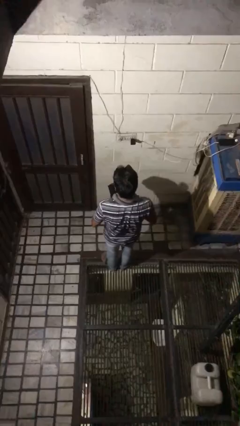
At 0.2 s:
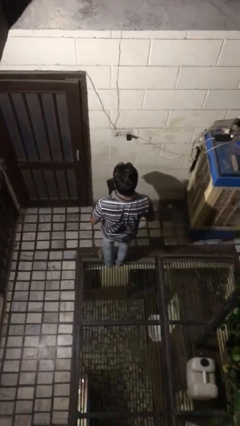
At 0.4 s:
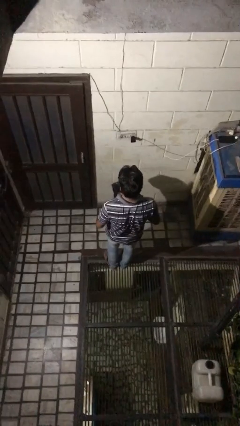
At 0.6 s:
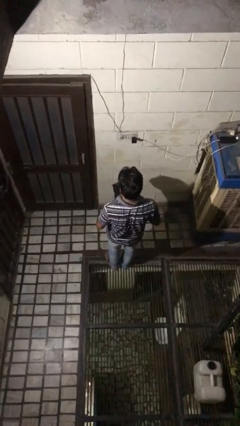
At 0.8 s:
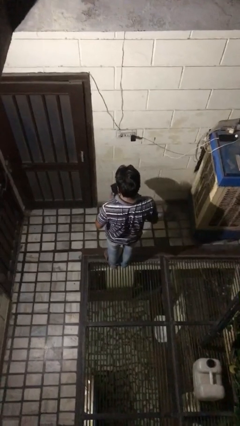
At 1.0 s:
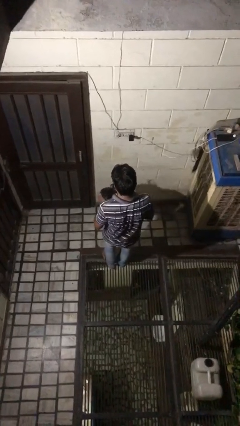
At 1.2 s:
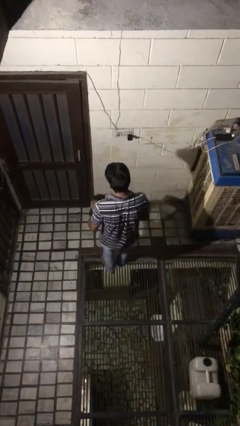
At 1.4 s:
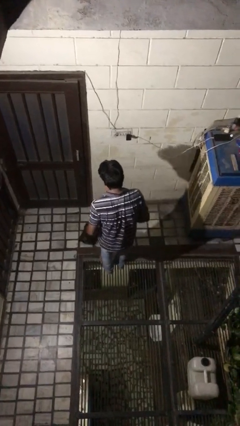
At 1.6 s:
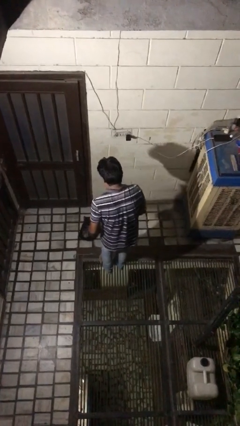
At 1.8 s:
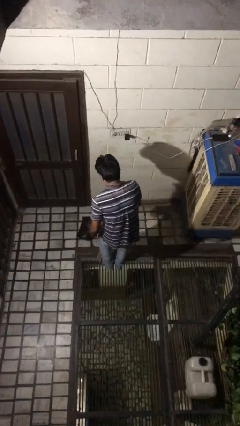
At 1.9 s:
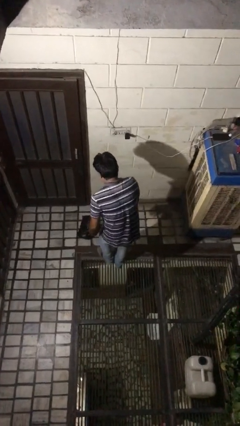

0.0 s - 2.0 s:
person throws object to ground

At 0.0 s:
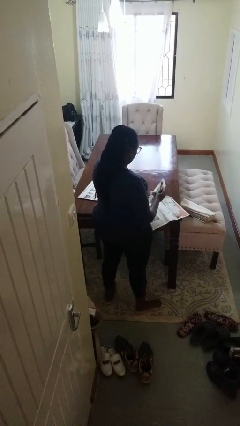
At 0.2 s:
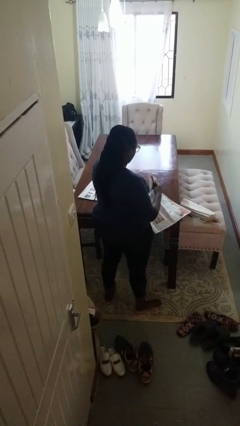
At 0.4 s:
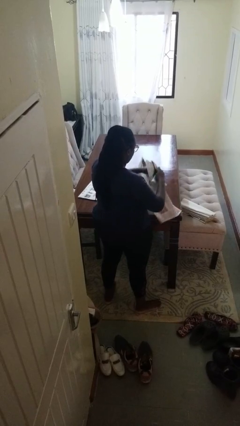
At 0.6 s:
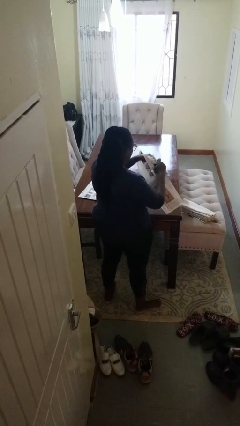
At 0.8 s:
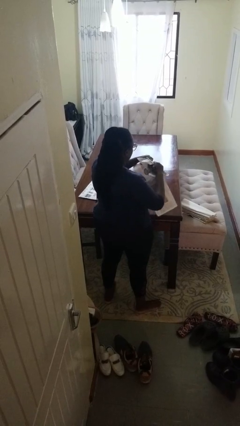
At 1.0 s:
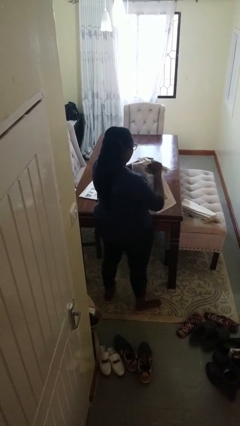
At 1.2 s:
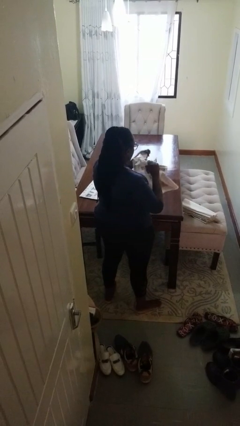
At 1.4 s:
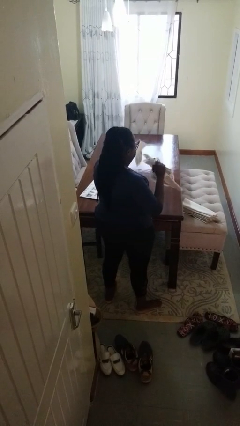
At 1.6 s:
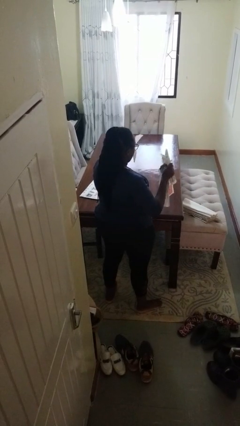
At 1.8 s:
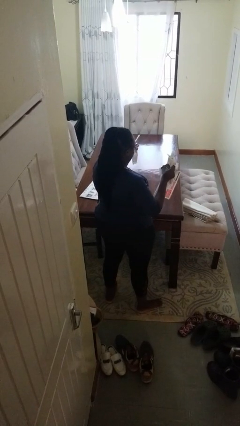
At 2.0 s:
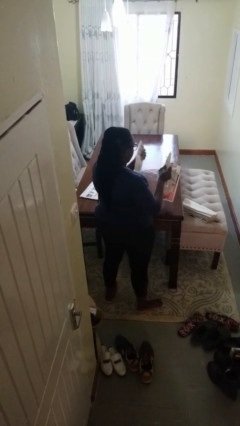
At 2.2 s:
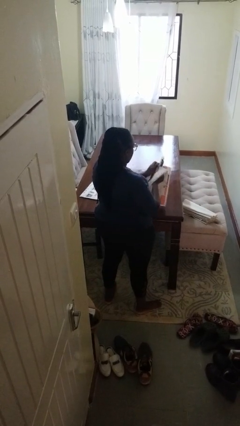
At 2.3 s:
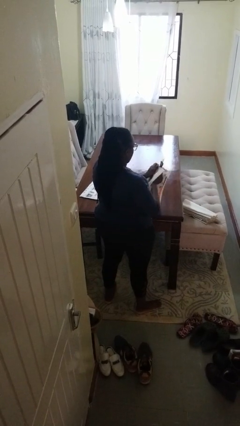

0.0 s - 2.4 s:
person tears paper

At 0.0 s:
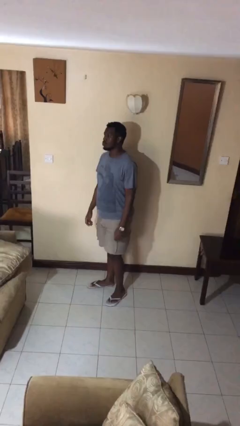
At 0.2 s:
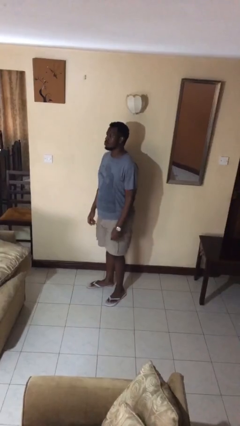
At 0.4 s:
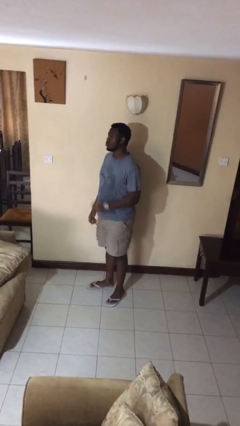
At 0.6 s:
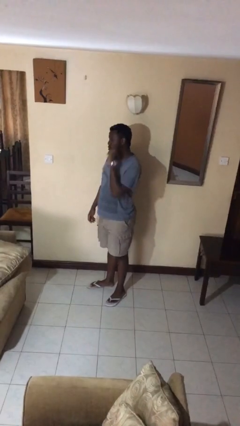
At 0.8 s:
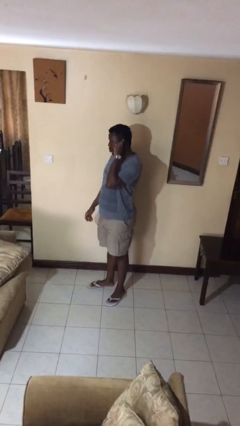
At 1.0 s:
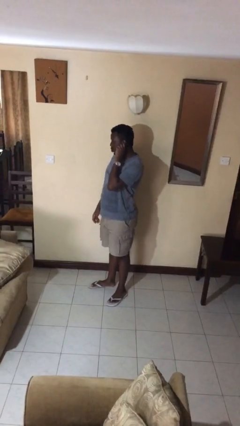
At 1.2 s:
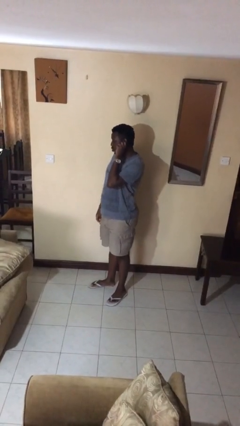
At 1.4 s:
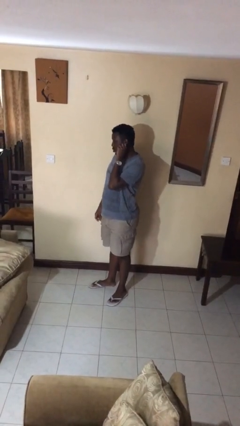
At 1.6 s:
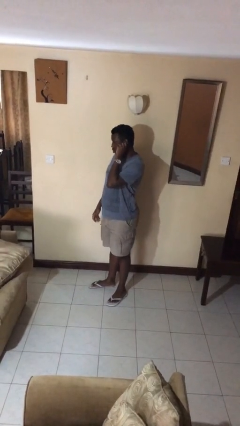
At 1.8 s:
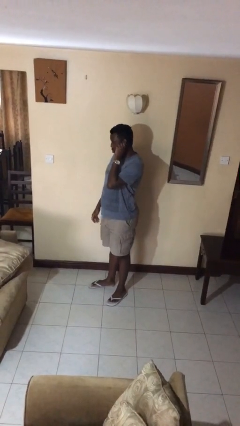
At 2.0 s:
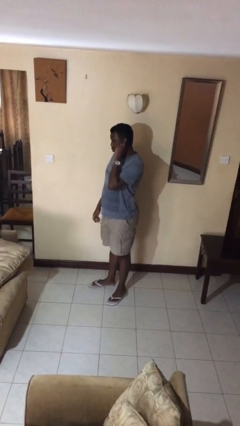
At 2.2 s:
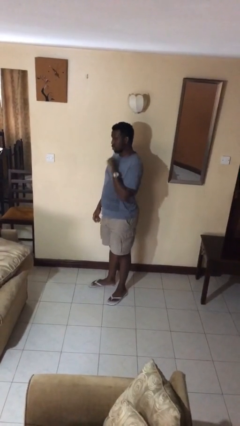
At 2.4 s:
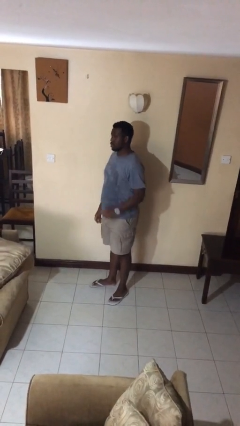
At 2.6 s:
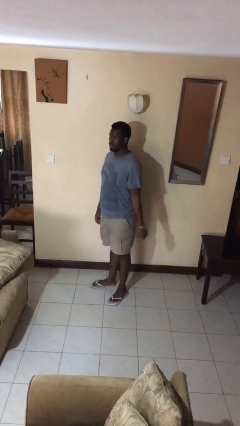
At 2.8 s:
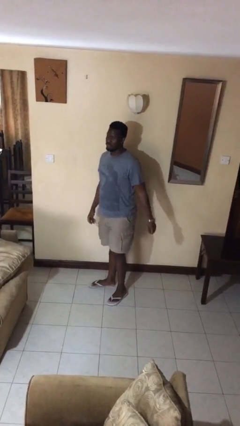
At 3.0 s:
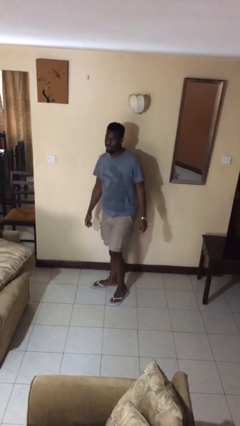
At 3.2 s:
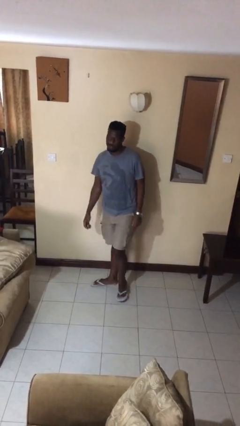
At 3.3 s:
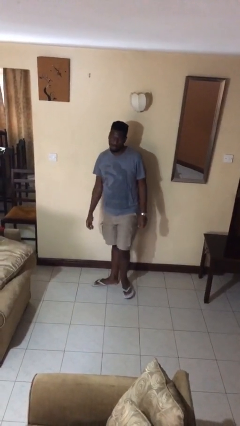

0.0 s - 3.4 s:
person touches earlobe

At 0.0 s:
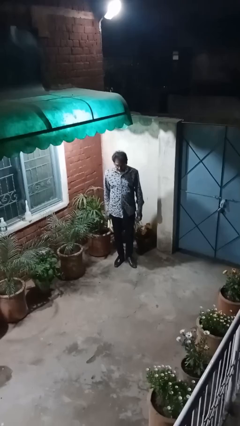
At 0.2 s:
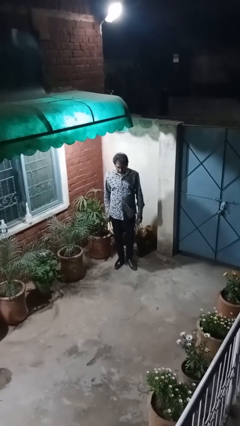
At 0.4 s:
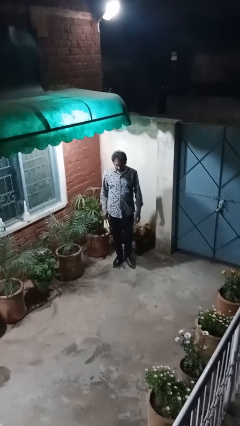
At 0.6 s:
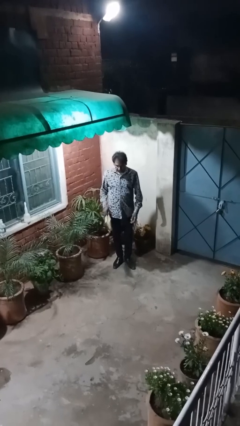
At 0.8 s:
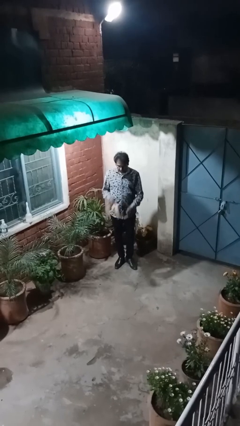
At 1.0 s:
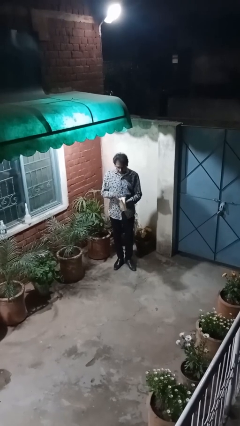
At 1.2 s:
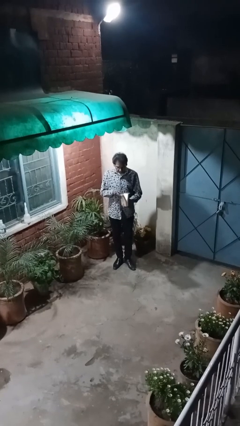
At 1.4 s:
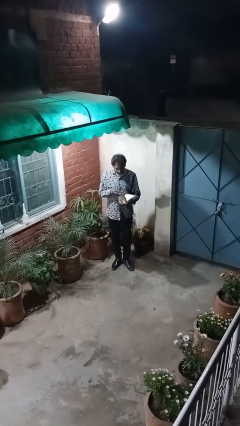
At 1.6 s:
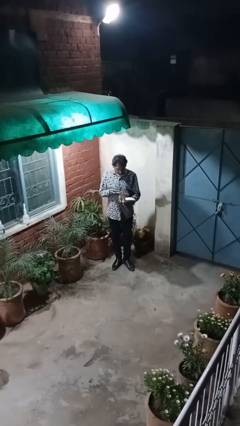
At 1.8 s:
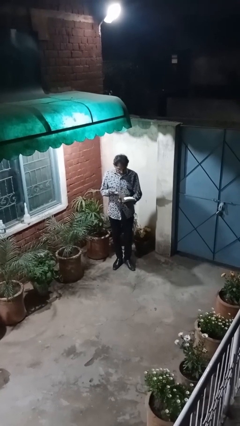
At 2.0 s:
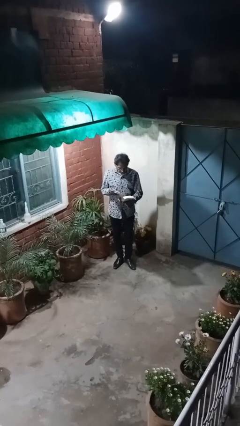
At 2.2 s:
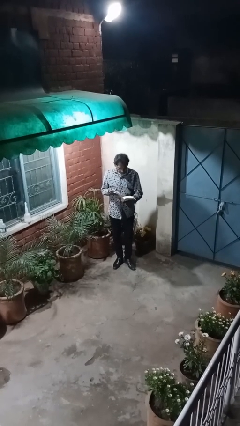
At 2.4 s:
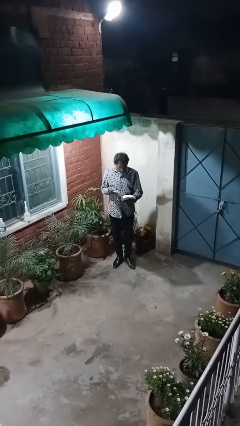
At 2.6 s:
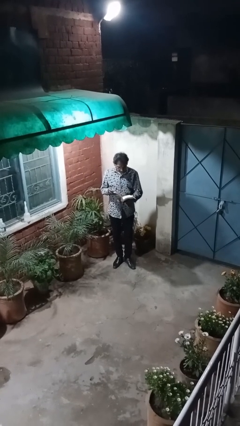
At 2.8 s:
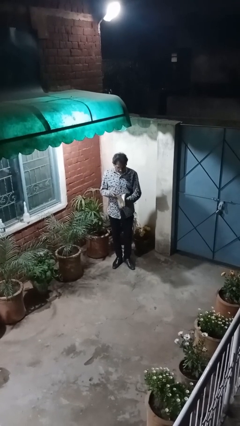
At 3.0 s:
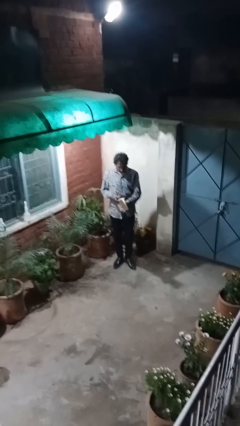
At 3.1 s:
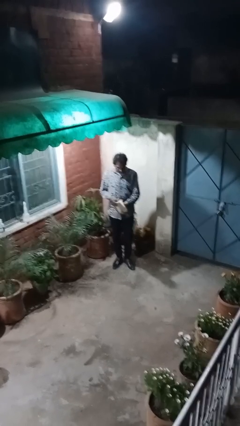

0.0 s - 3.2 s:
person reads document

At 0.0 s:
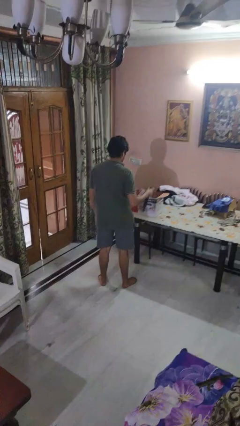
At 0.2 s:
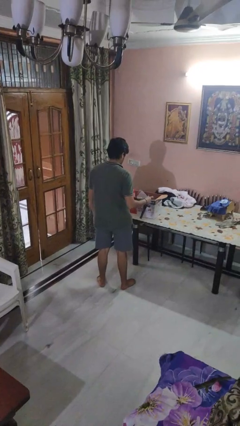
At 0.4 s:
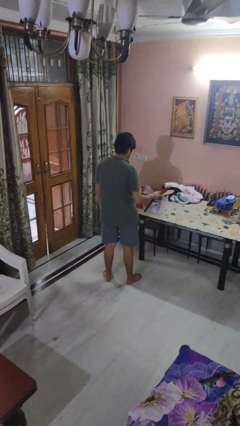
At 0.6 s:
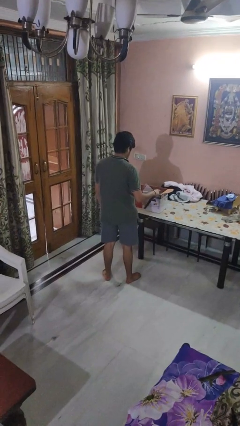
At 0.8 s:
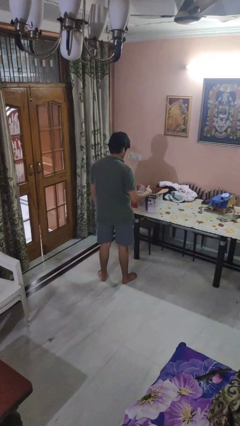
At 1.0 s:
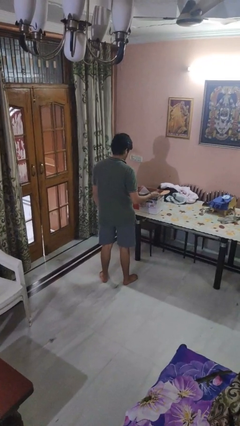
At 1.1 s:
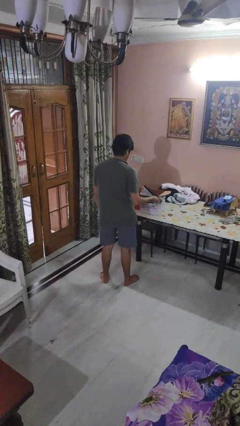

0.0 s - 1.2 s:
person takes object from box

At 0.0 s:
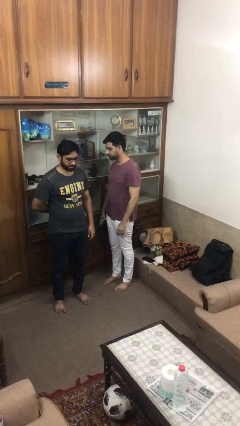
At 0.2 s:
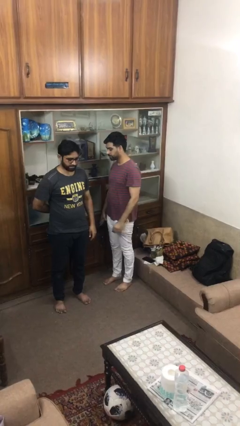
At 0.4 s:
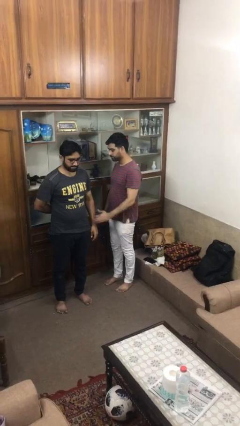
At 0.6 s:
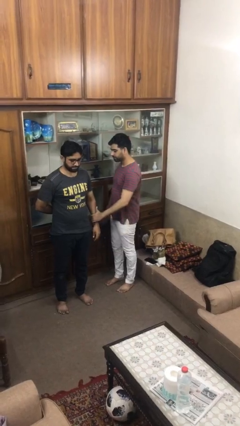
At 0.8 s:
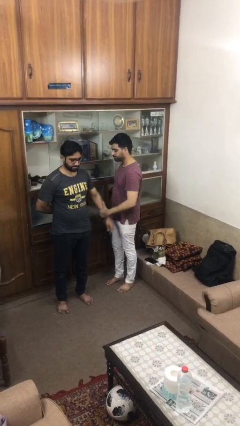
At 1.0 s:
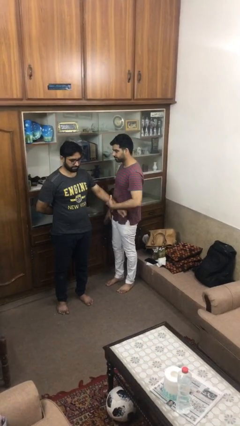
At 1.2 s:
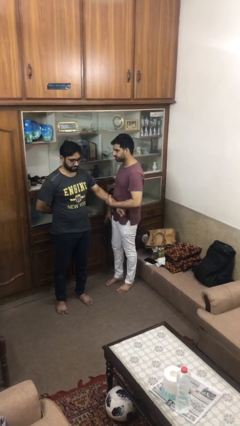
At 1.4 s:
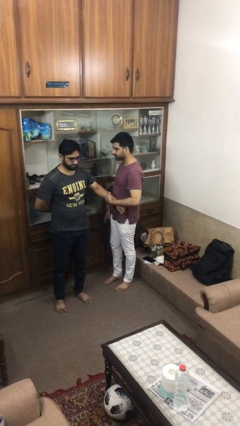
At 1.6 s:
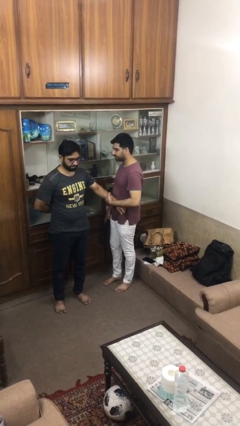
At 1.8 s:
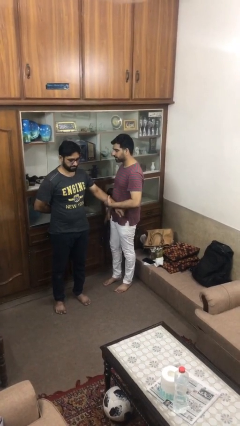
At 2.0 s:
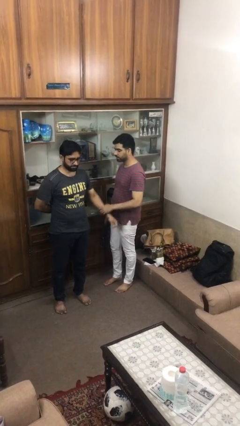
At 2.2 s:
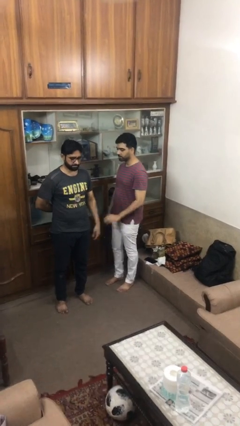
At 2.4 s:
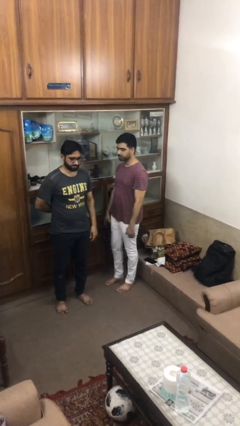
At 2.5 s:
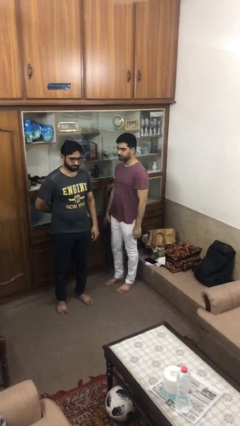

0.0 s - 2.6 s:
person grabs person by forearm

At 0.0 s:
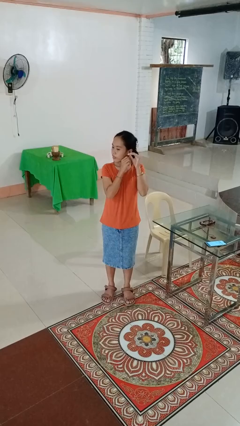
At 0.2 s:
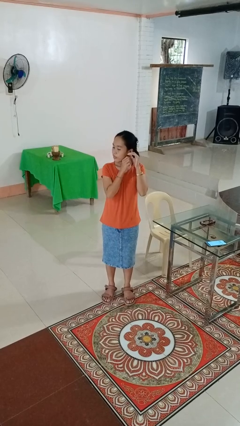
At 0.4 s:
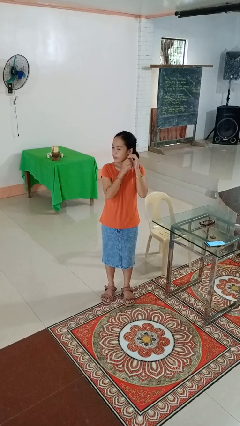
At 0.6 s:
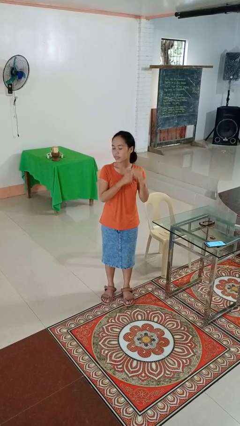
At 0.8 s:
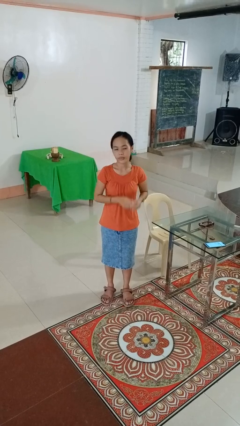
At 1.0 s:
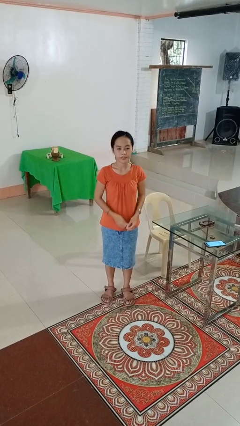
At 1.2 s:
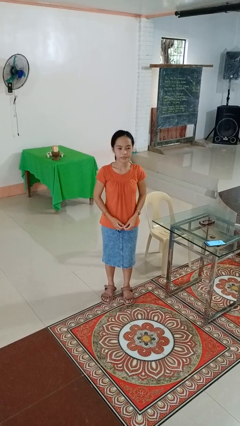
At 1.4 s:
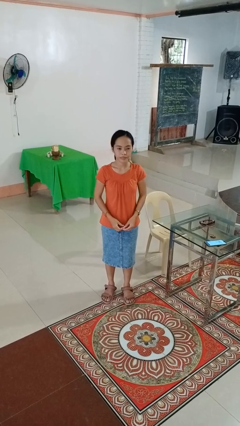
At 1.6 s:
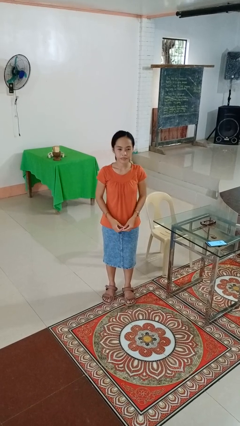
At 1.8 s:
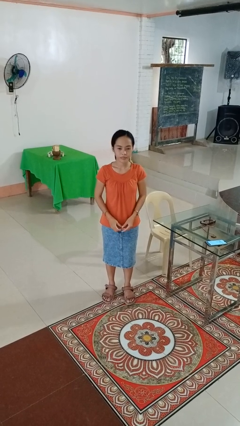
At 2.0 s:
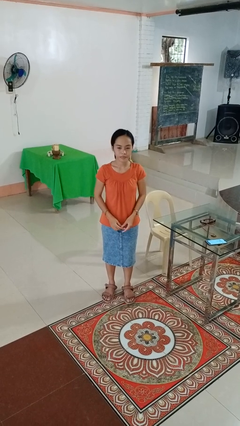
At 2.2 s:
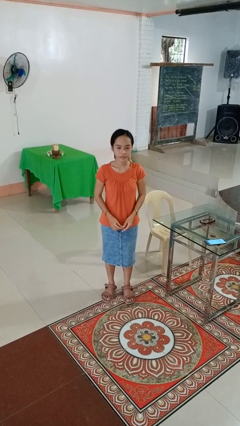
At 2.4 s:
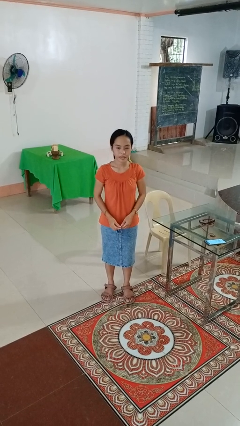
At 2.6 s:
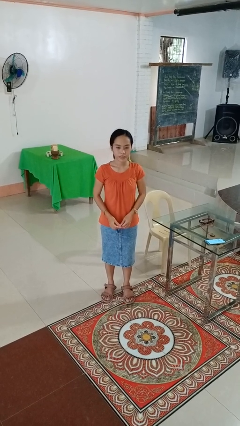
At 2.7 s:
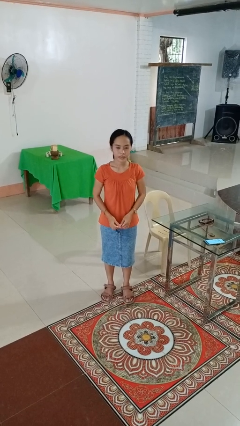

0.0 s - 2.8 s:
person takes off earrings
